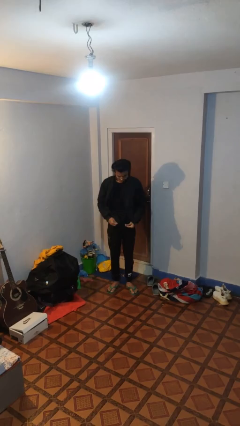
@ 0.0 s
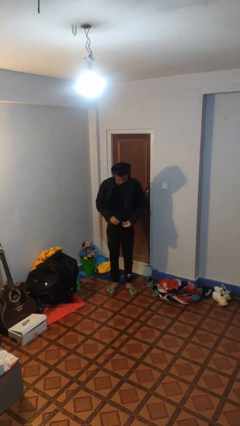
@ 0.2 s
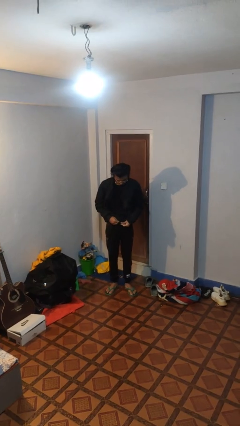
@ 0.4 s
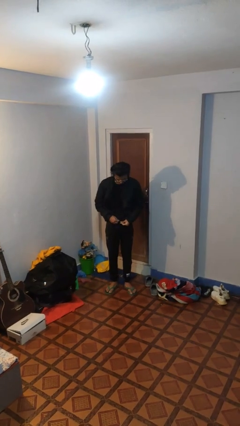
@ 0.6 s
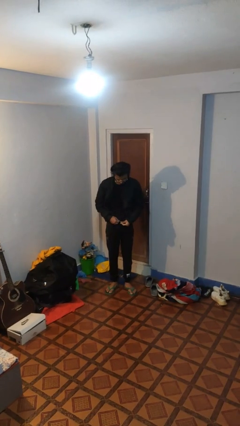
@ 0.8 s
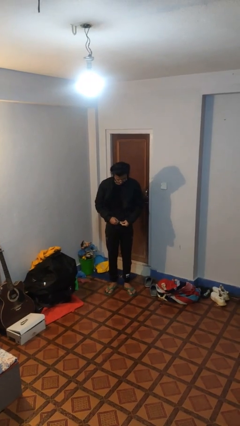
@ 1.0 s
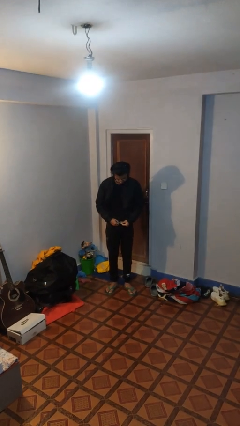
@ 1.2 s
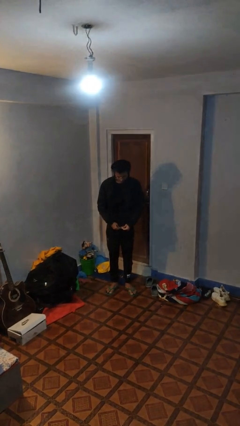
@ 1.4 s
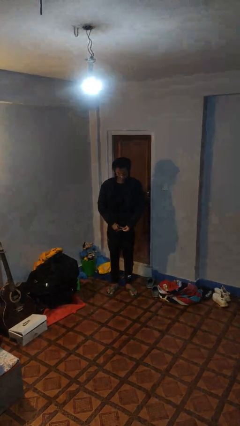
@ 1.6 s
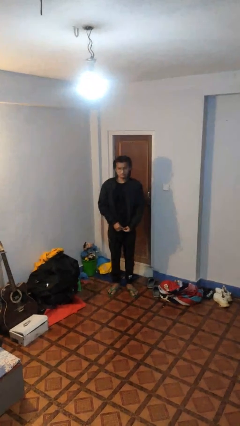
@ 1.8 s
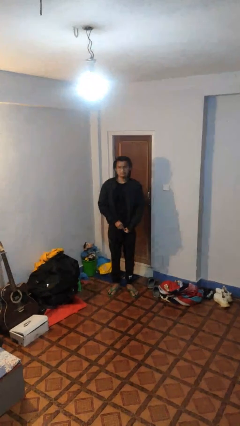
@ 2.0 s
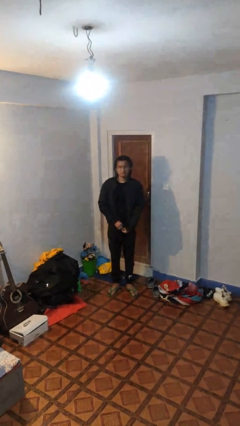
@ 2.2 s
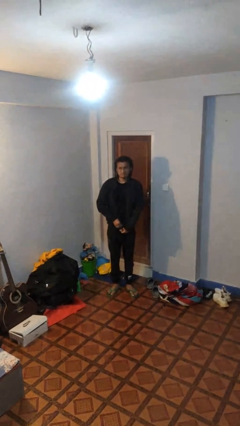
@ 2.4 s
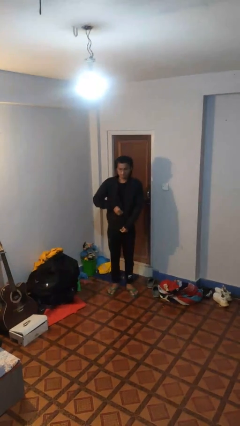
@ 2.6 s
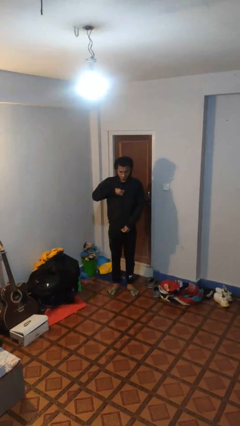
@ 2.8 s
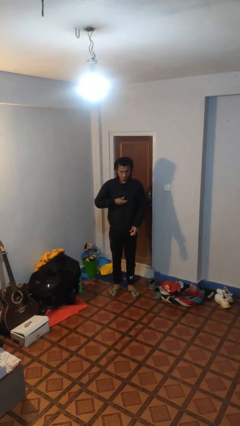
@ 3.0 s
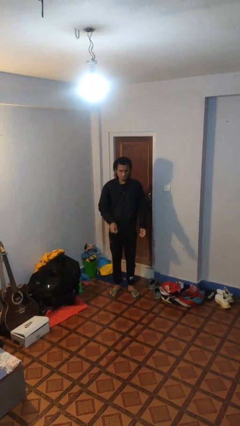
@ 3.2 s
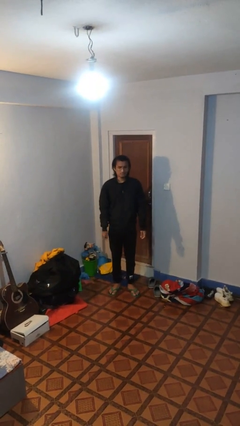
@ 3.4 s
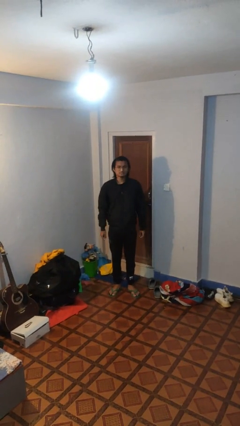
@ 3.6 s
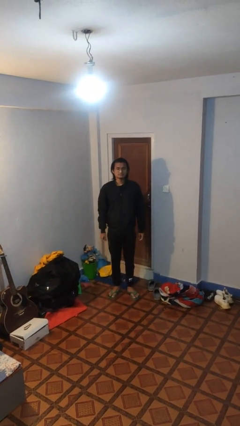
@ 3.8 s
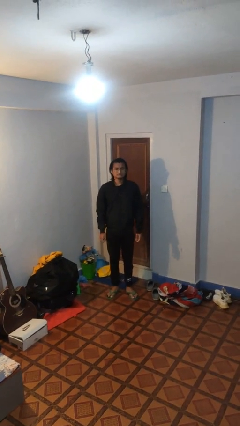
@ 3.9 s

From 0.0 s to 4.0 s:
person zips up jacket

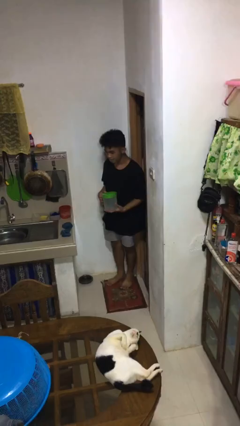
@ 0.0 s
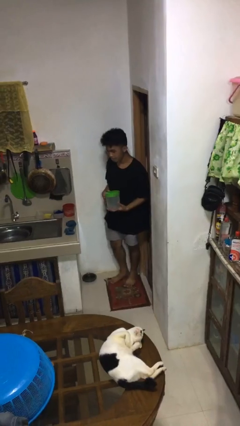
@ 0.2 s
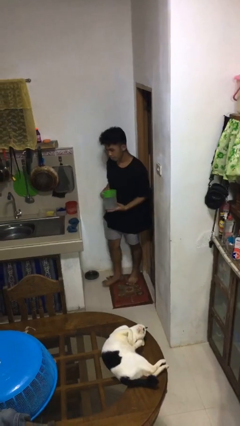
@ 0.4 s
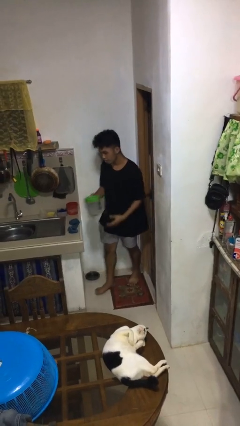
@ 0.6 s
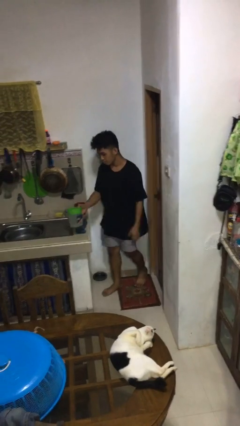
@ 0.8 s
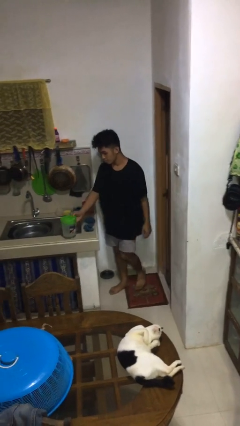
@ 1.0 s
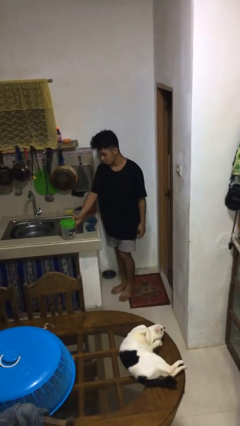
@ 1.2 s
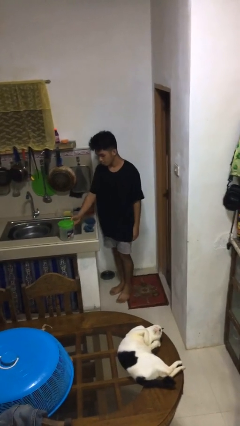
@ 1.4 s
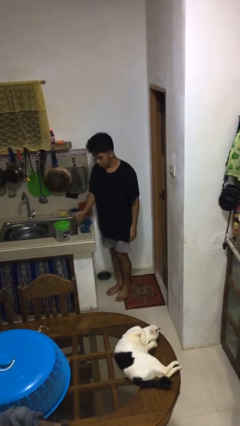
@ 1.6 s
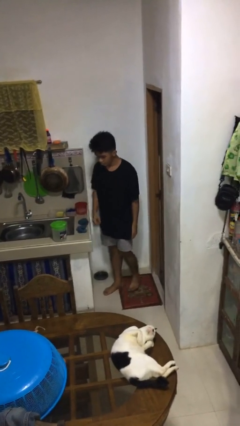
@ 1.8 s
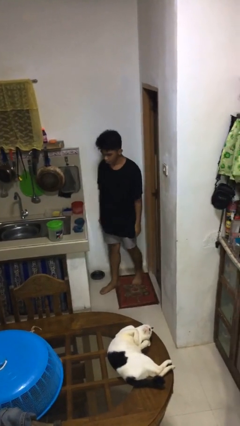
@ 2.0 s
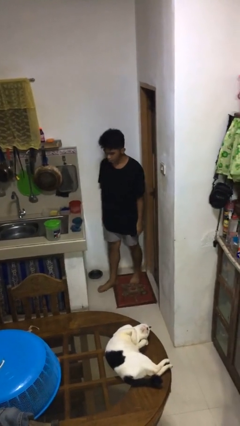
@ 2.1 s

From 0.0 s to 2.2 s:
person puts down object on countertop

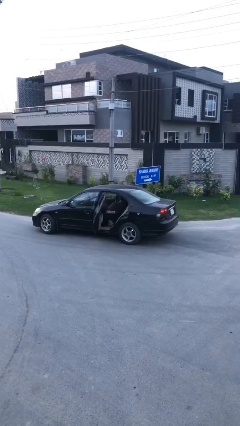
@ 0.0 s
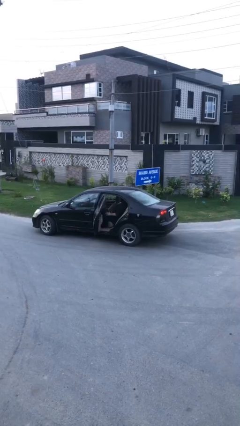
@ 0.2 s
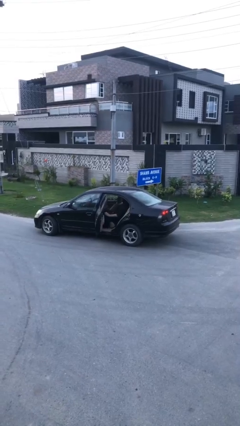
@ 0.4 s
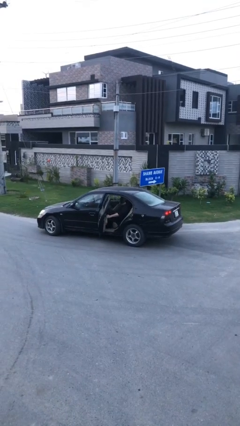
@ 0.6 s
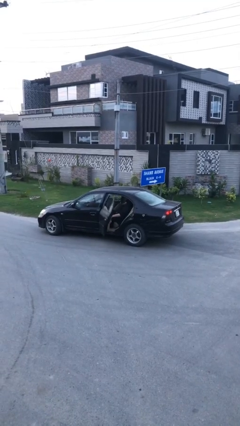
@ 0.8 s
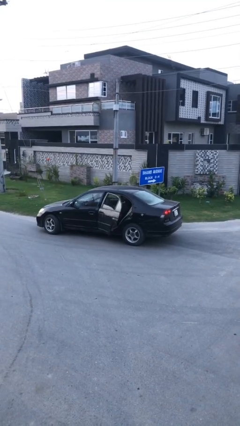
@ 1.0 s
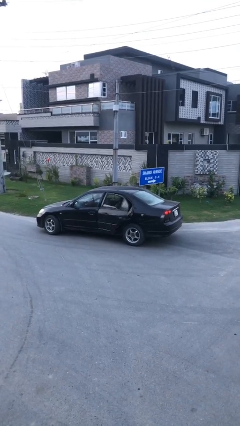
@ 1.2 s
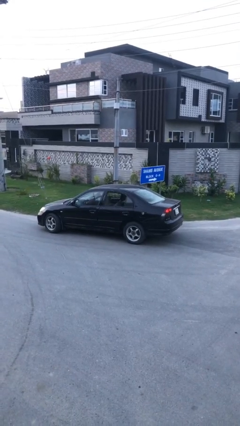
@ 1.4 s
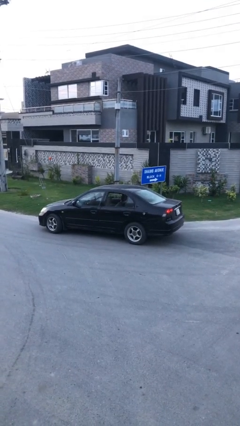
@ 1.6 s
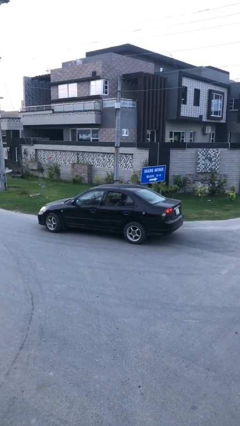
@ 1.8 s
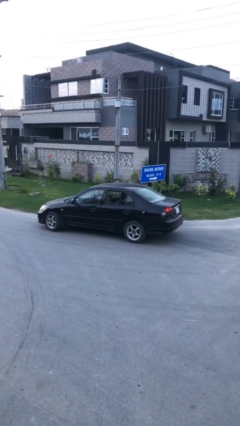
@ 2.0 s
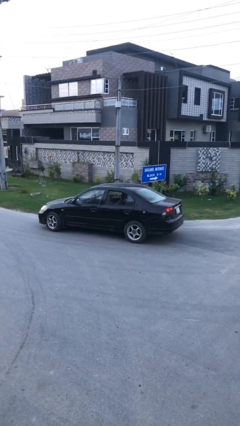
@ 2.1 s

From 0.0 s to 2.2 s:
person closes car door

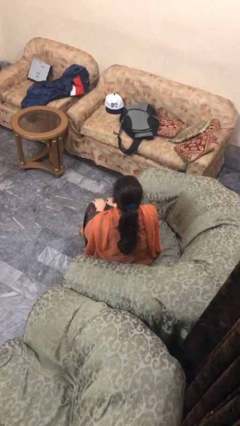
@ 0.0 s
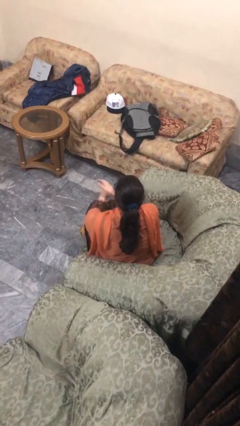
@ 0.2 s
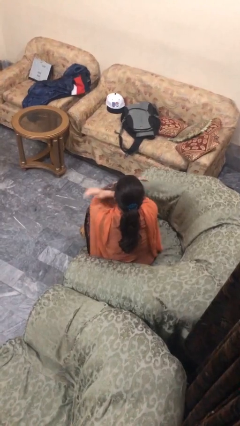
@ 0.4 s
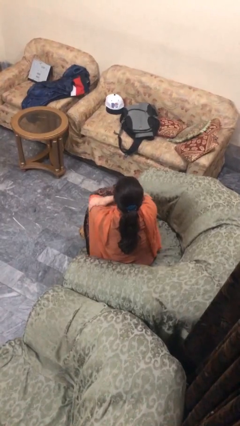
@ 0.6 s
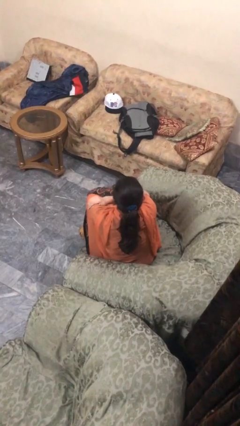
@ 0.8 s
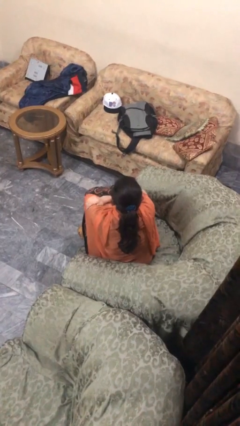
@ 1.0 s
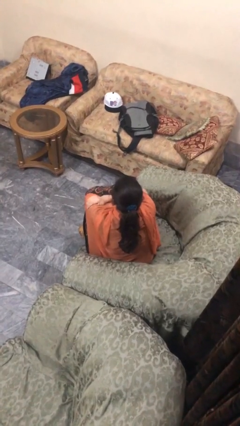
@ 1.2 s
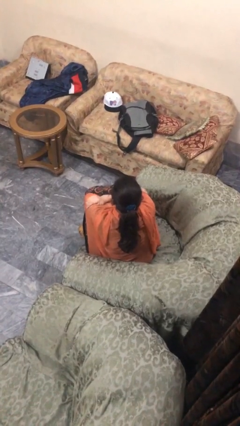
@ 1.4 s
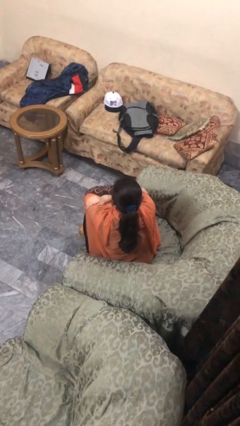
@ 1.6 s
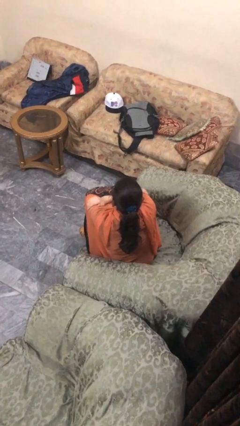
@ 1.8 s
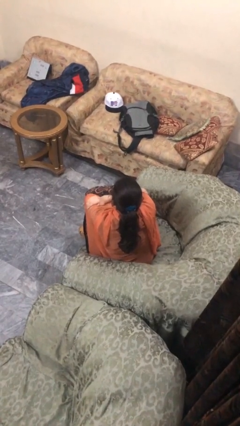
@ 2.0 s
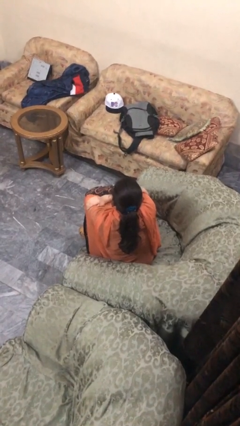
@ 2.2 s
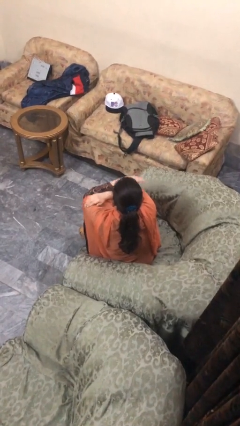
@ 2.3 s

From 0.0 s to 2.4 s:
person crosses arms

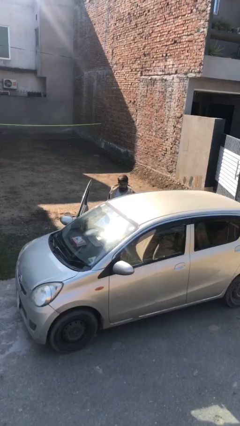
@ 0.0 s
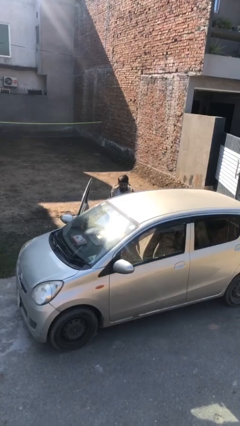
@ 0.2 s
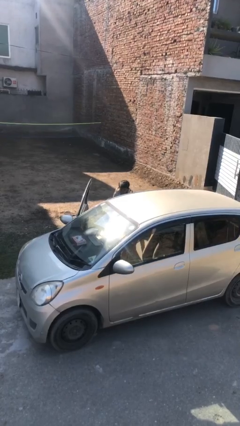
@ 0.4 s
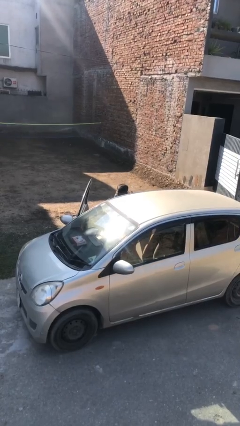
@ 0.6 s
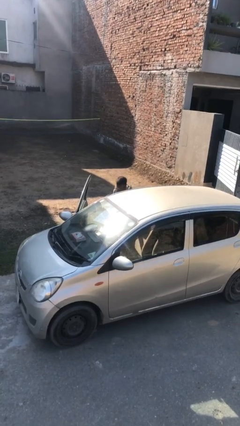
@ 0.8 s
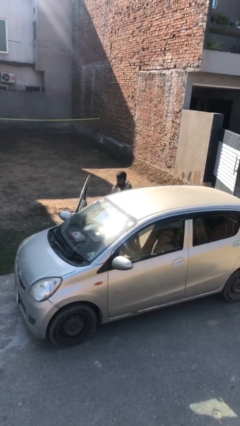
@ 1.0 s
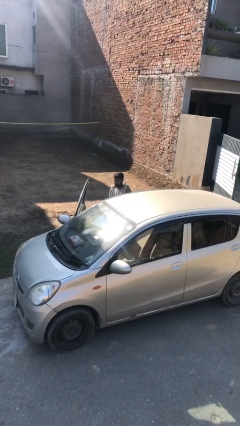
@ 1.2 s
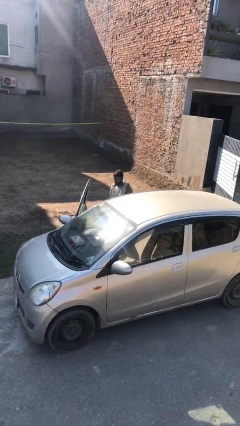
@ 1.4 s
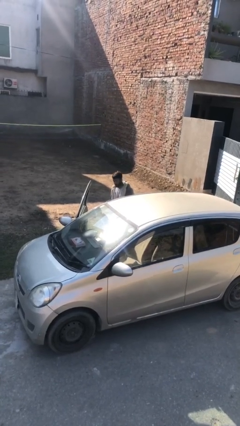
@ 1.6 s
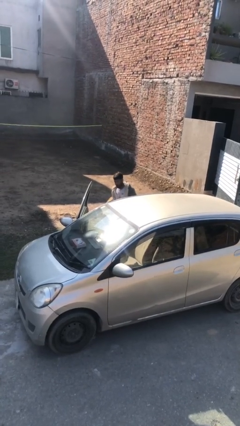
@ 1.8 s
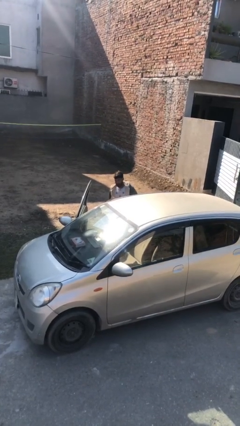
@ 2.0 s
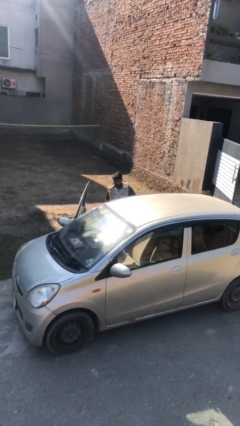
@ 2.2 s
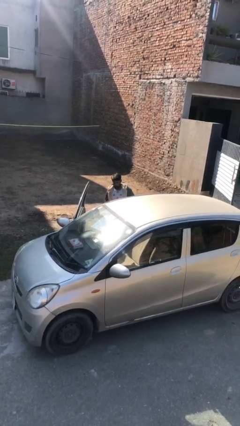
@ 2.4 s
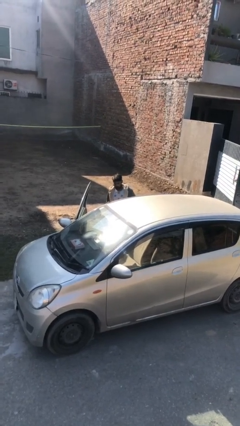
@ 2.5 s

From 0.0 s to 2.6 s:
person unloads car

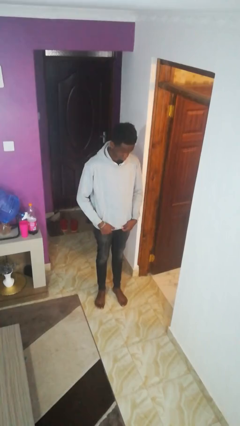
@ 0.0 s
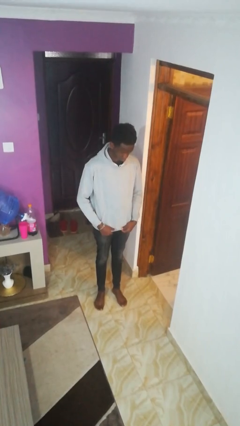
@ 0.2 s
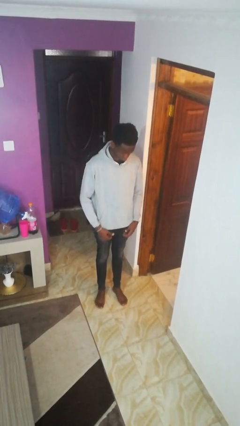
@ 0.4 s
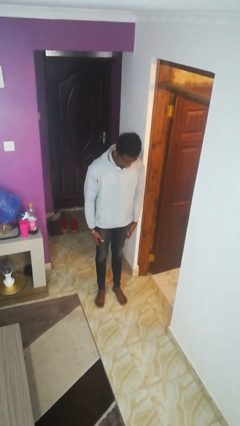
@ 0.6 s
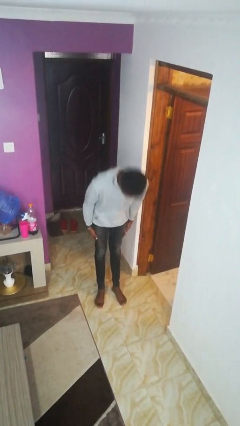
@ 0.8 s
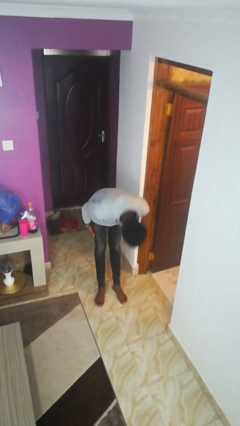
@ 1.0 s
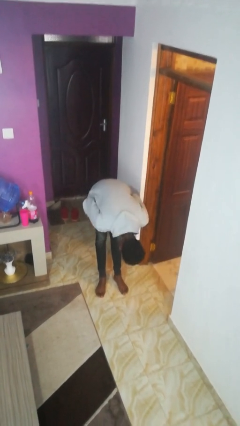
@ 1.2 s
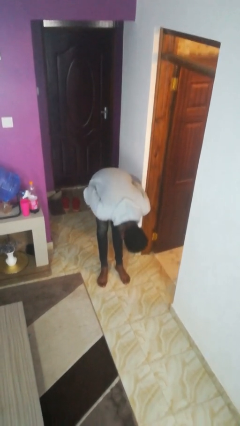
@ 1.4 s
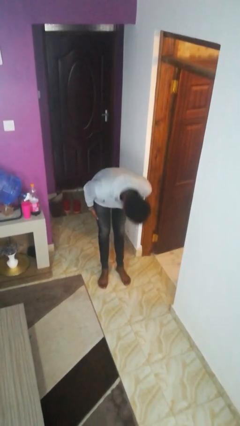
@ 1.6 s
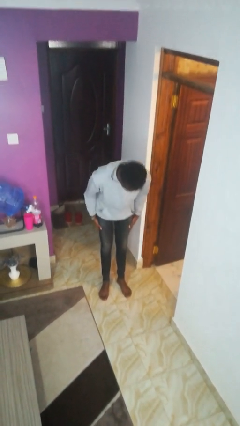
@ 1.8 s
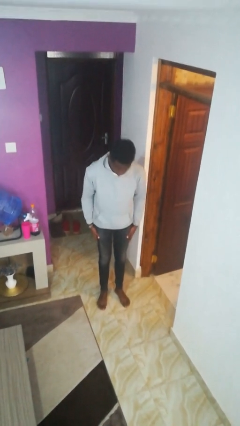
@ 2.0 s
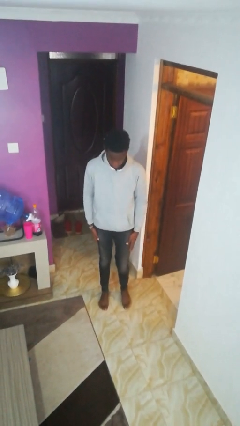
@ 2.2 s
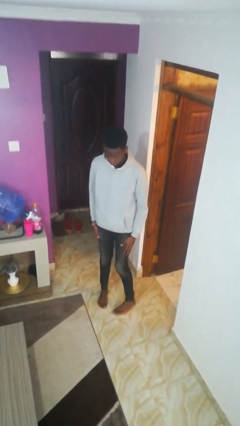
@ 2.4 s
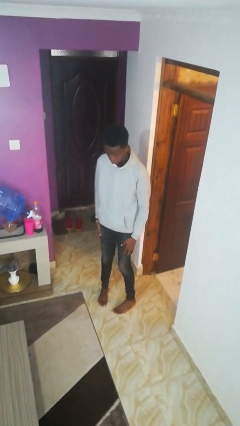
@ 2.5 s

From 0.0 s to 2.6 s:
person bows

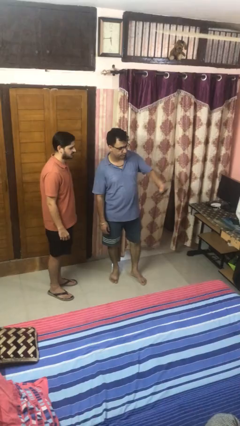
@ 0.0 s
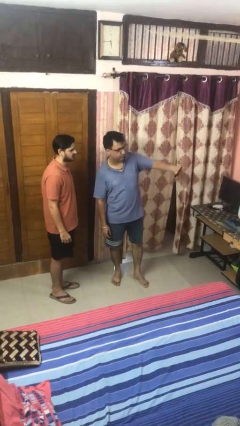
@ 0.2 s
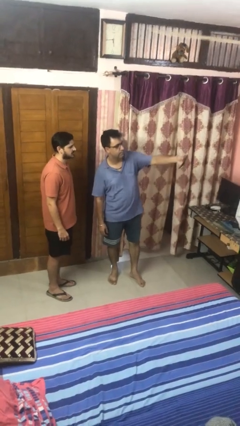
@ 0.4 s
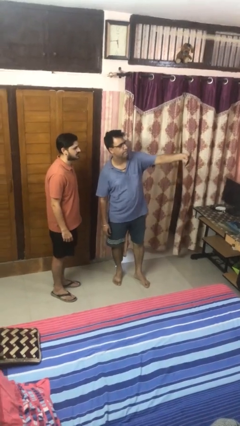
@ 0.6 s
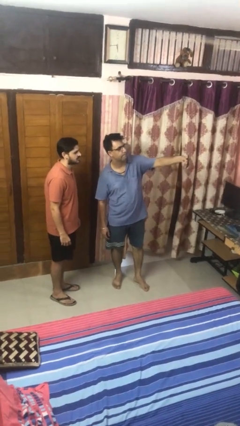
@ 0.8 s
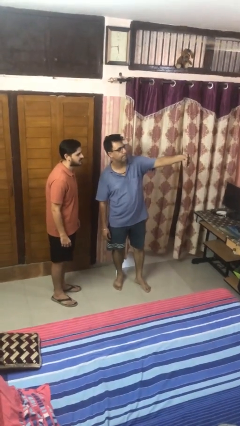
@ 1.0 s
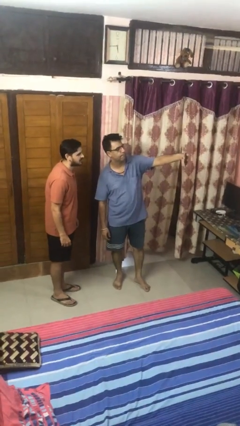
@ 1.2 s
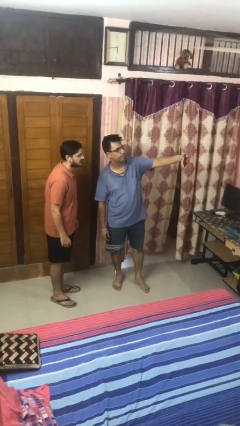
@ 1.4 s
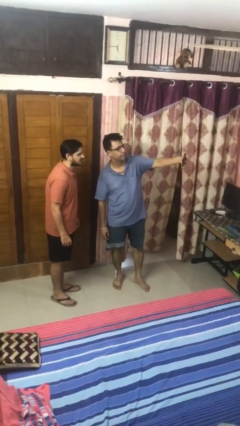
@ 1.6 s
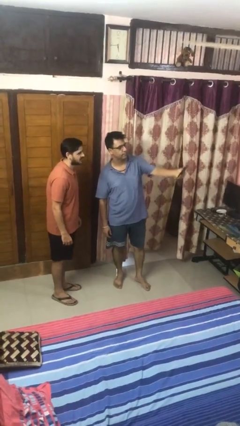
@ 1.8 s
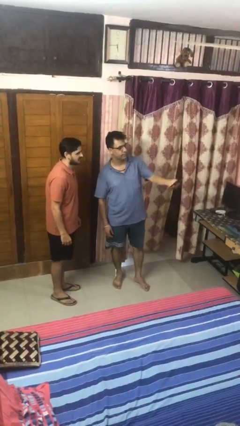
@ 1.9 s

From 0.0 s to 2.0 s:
person takes selfie with person
